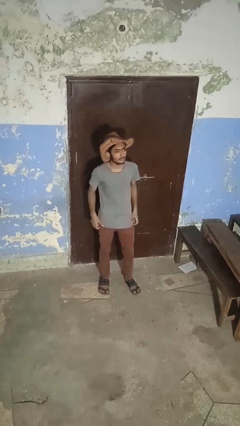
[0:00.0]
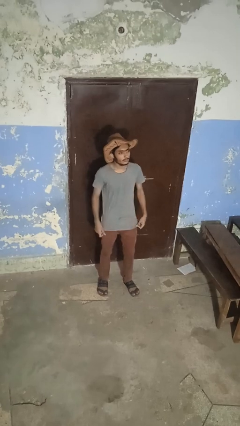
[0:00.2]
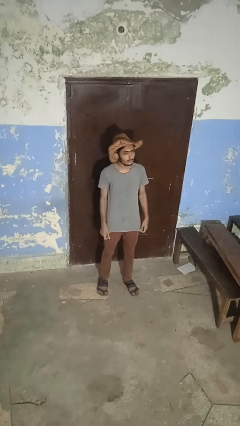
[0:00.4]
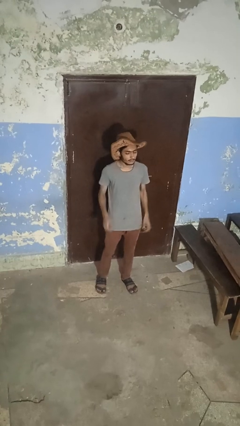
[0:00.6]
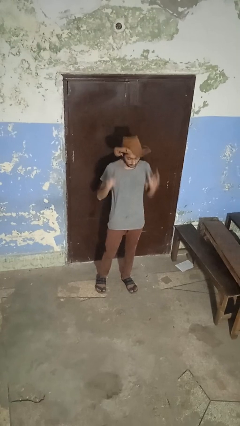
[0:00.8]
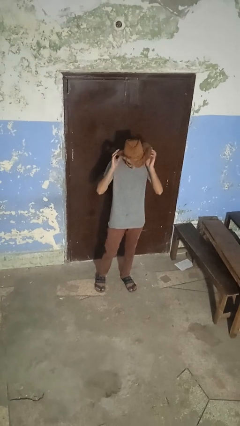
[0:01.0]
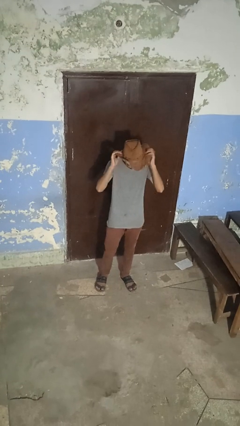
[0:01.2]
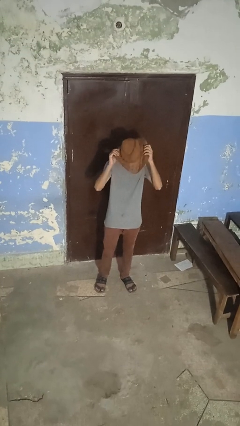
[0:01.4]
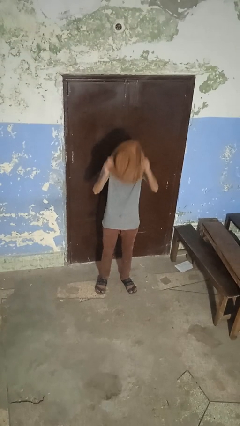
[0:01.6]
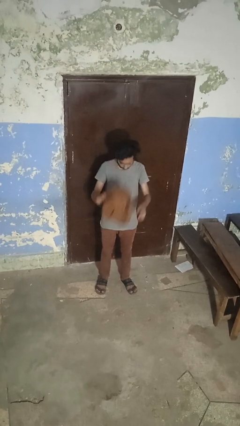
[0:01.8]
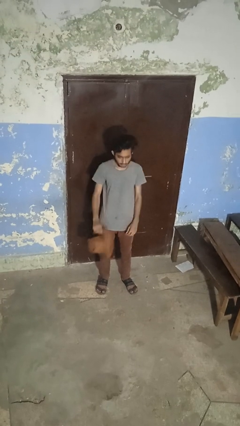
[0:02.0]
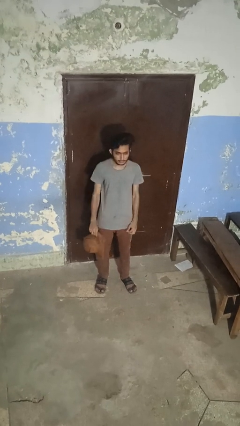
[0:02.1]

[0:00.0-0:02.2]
person takes off hat

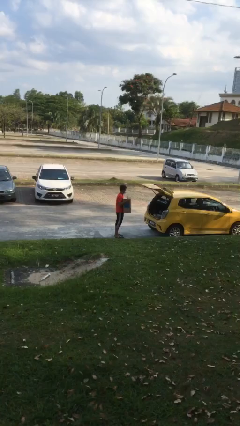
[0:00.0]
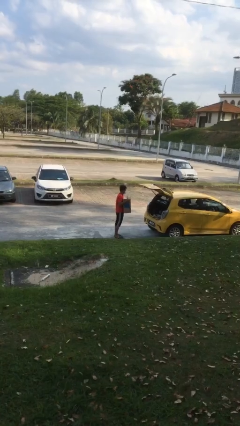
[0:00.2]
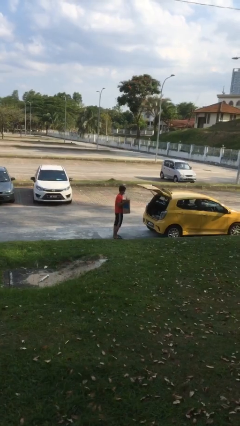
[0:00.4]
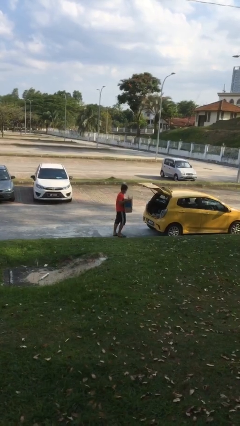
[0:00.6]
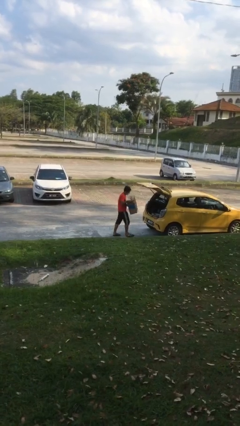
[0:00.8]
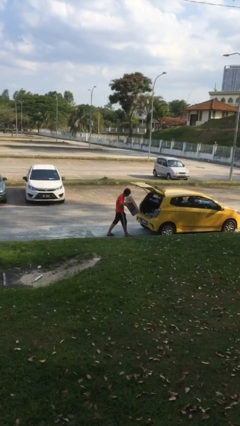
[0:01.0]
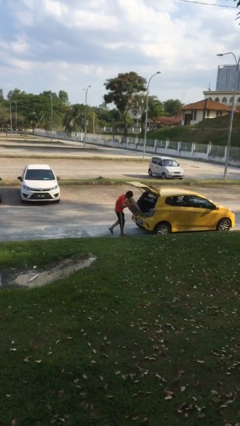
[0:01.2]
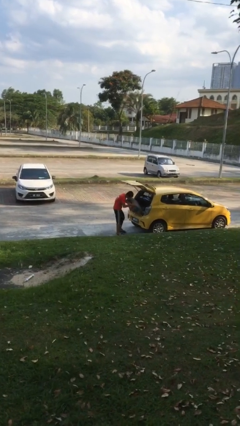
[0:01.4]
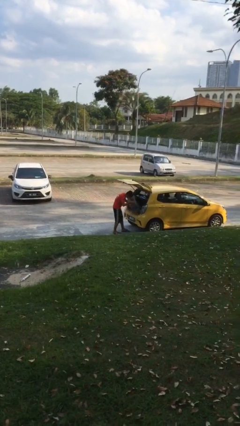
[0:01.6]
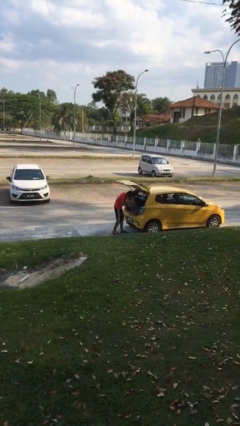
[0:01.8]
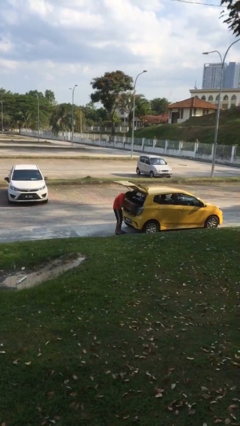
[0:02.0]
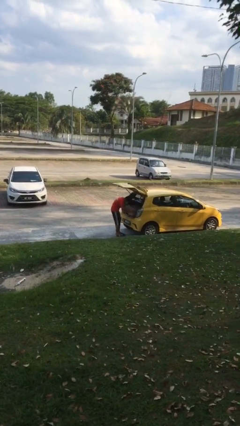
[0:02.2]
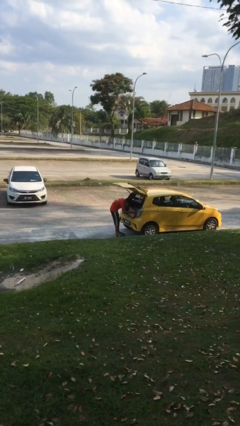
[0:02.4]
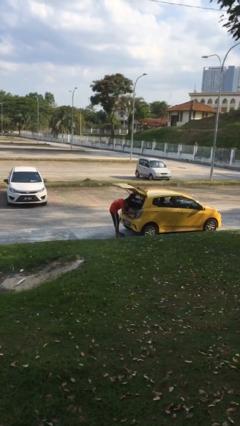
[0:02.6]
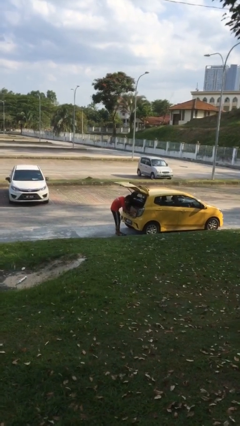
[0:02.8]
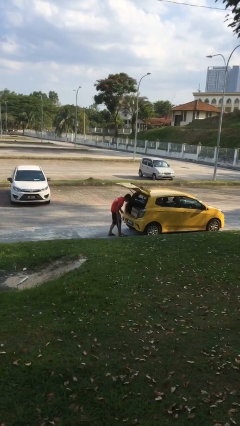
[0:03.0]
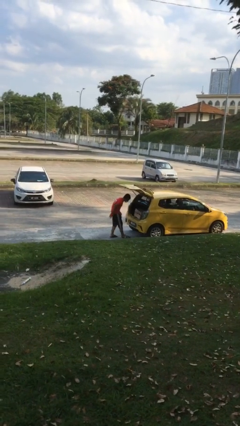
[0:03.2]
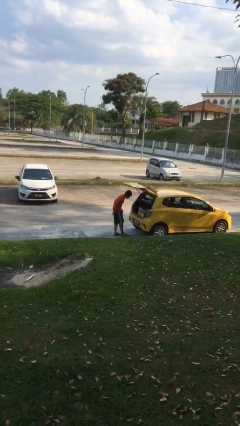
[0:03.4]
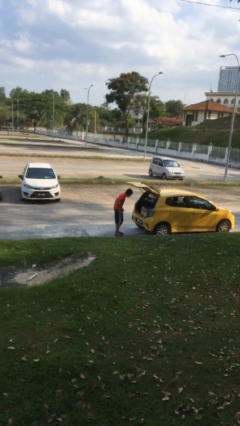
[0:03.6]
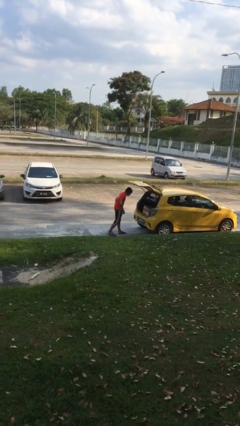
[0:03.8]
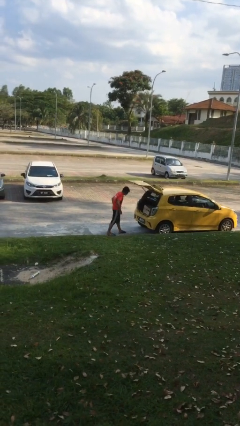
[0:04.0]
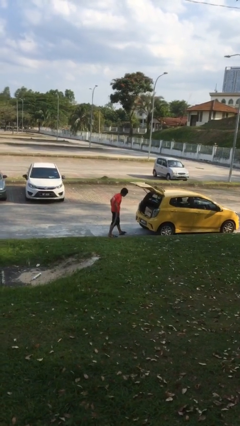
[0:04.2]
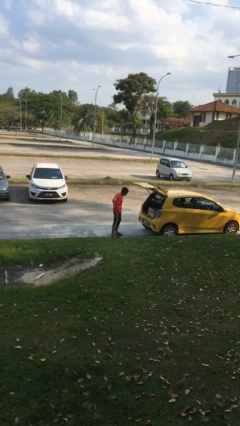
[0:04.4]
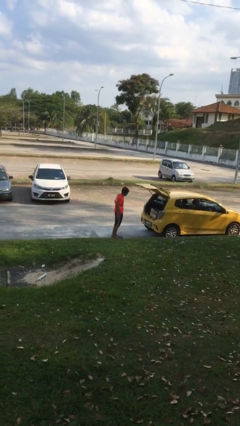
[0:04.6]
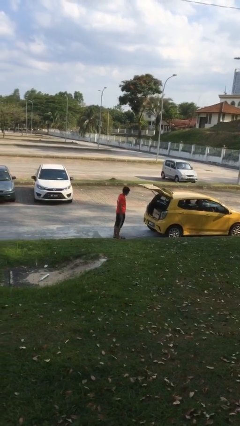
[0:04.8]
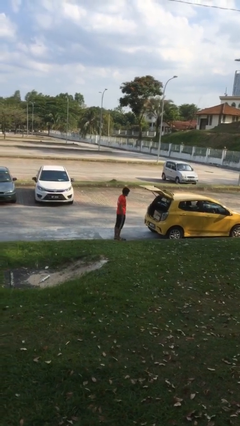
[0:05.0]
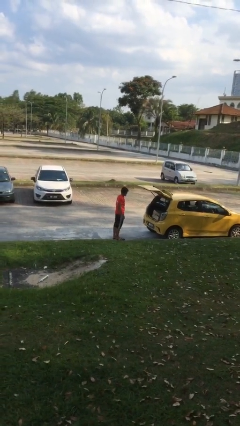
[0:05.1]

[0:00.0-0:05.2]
person loads car

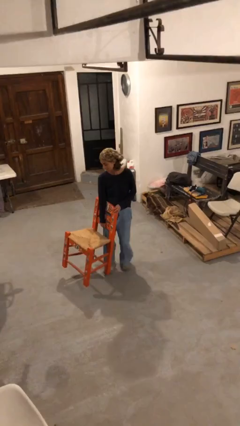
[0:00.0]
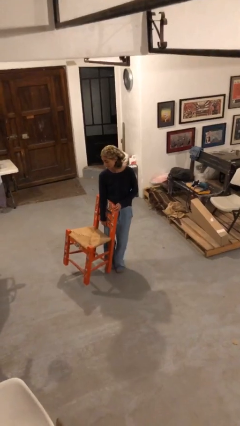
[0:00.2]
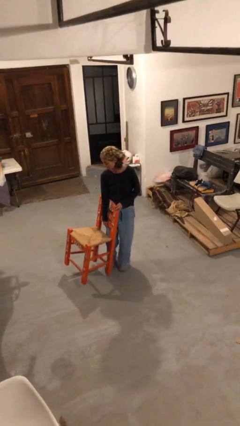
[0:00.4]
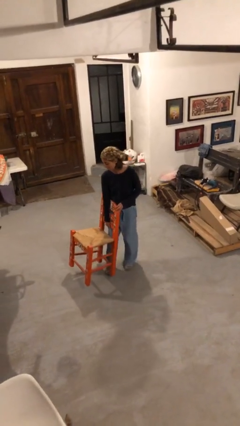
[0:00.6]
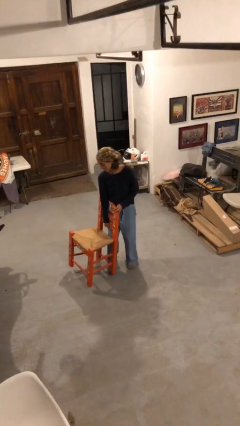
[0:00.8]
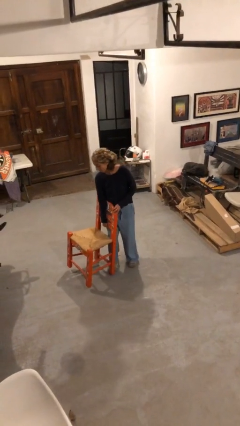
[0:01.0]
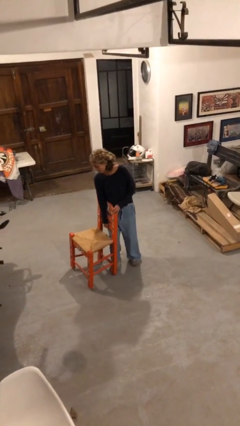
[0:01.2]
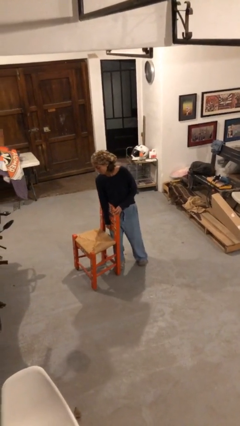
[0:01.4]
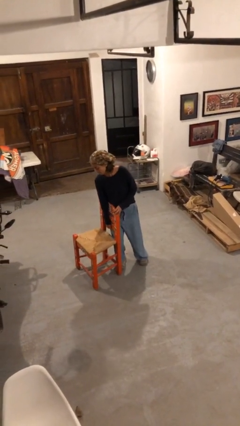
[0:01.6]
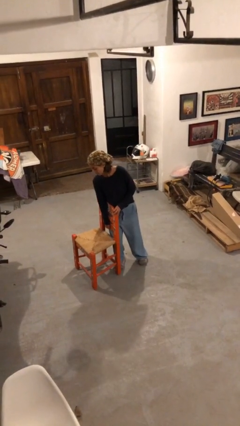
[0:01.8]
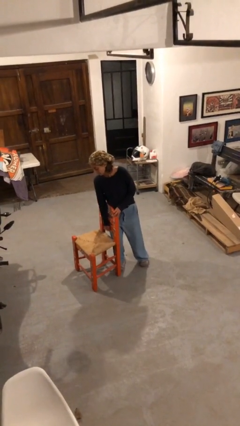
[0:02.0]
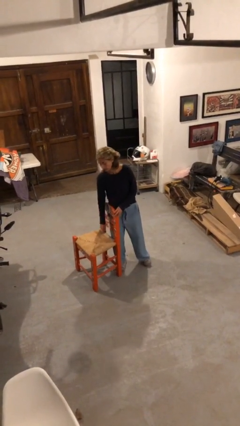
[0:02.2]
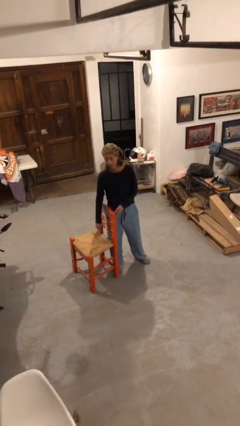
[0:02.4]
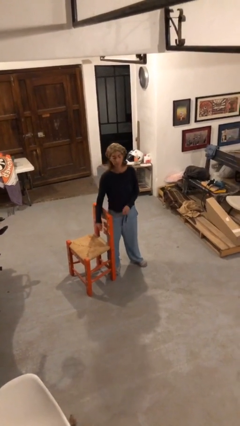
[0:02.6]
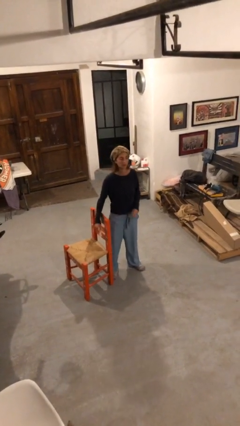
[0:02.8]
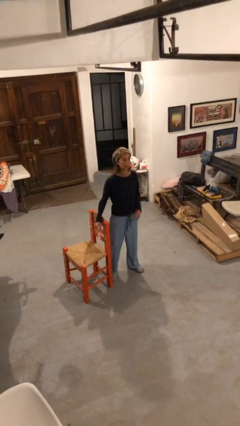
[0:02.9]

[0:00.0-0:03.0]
person puts down object on floor

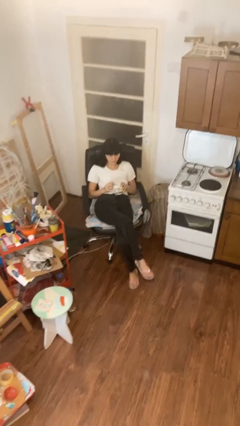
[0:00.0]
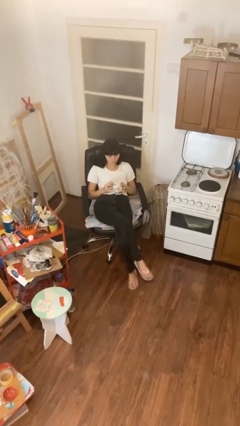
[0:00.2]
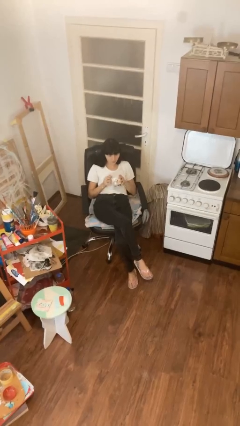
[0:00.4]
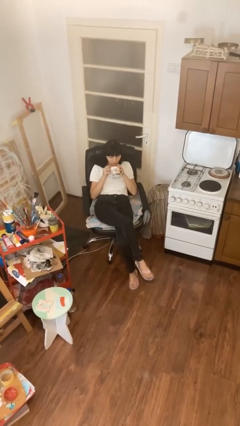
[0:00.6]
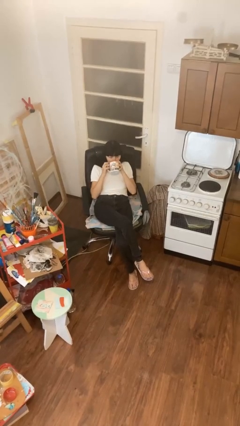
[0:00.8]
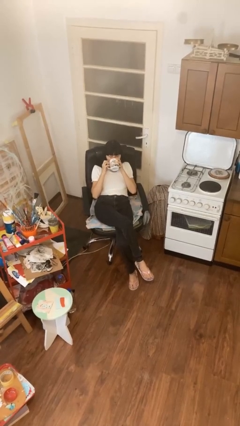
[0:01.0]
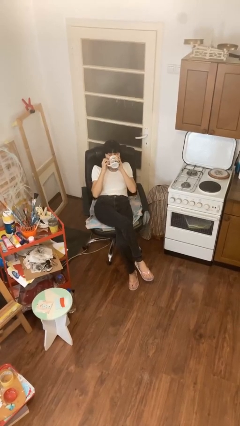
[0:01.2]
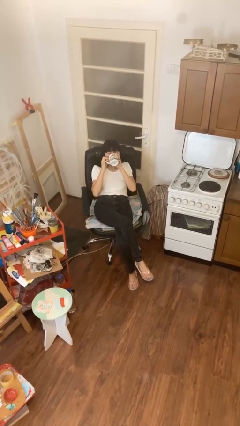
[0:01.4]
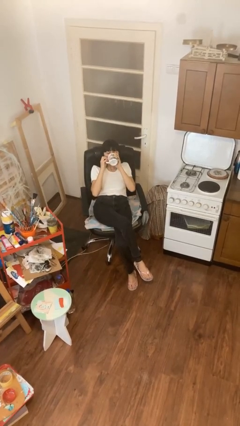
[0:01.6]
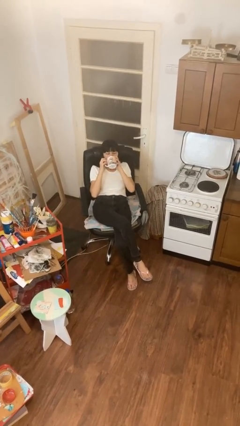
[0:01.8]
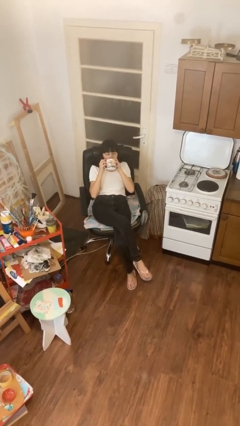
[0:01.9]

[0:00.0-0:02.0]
person drinks from mug

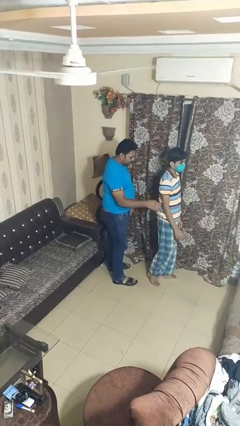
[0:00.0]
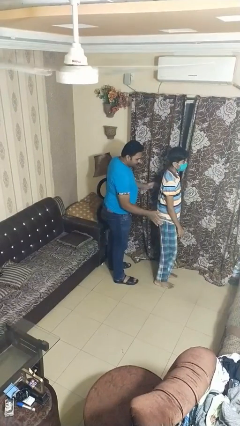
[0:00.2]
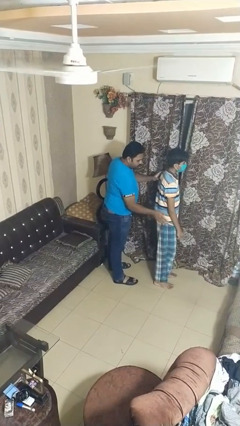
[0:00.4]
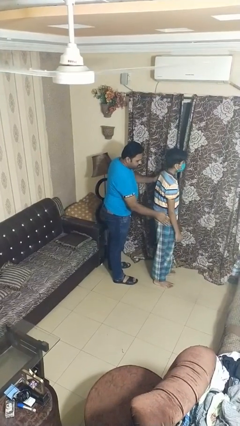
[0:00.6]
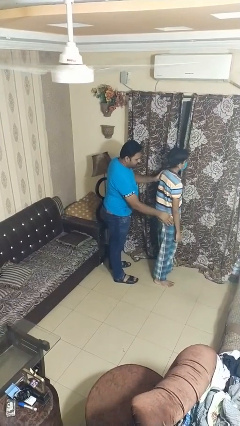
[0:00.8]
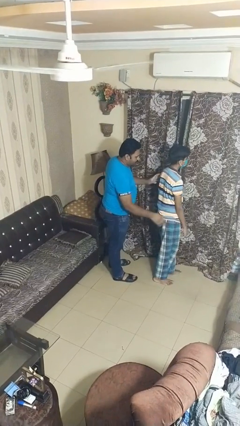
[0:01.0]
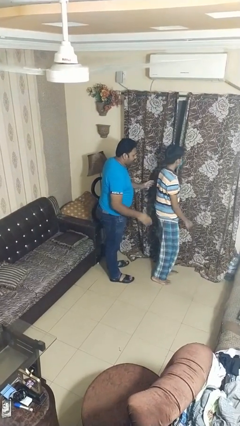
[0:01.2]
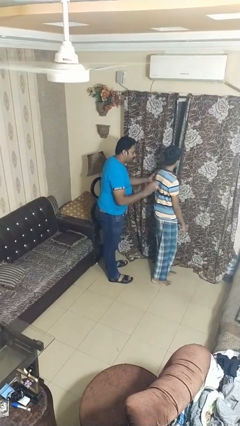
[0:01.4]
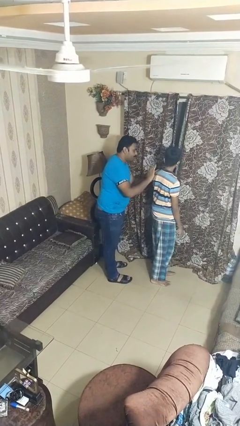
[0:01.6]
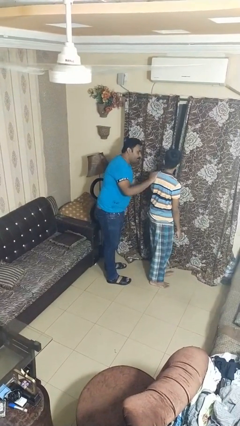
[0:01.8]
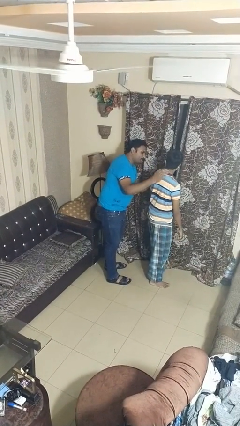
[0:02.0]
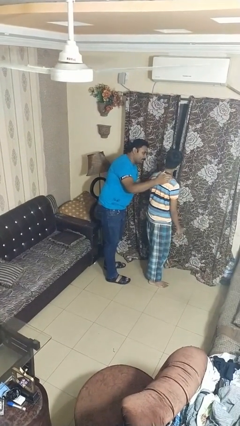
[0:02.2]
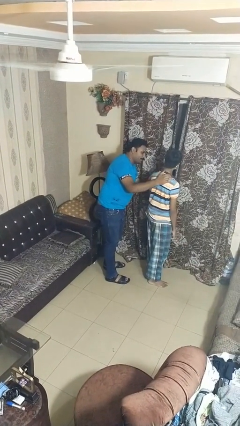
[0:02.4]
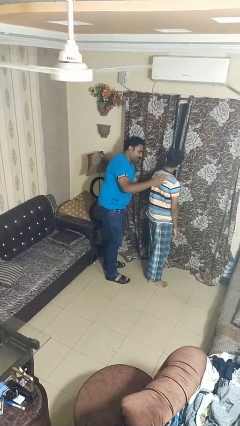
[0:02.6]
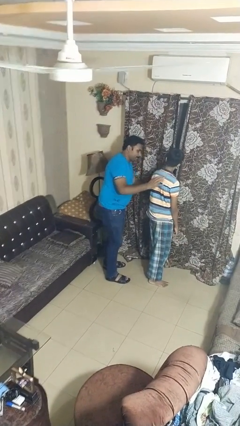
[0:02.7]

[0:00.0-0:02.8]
person bumps into person

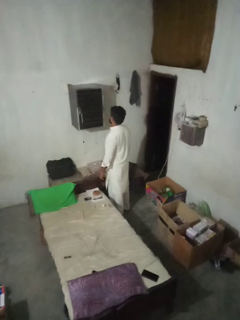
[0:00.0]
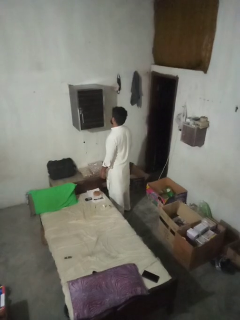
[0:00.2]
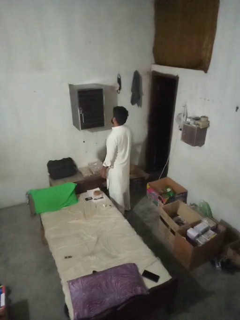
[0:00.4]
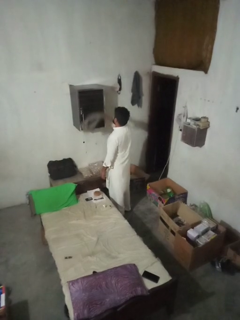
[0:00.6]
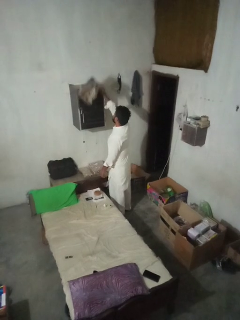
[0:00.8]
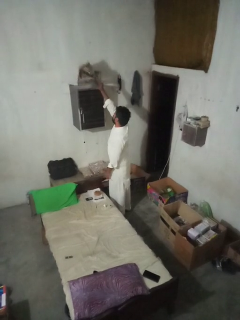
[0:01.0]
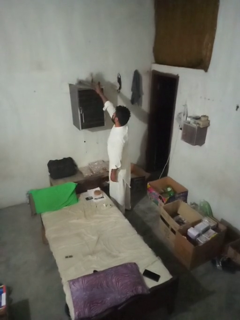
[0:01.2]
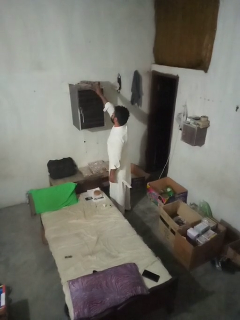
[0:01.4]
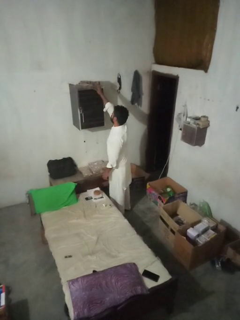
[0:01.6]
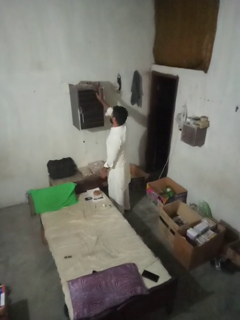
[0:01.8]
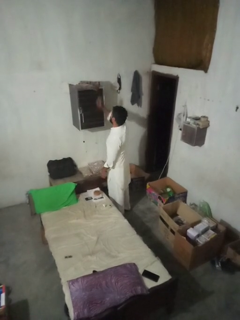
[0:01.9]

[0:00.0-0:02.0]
person puts down object on shelf
